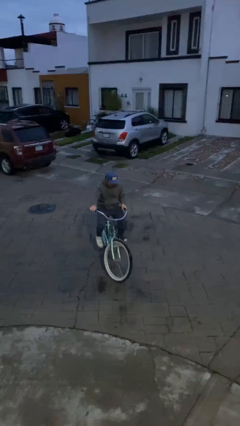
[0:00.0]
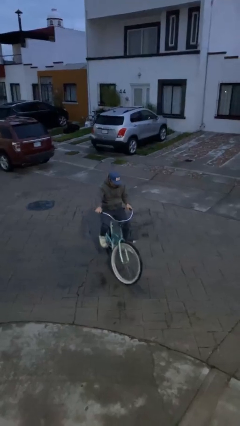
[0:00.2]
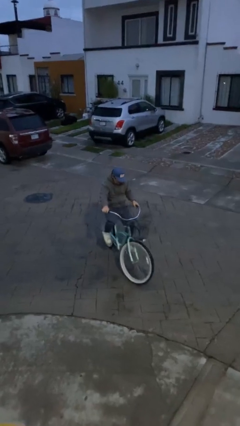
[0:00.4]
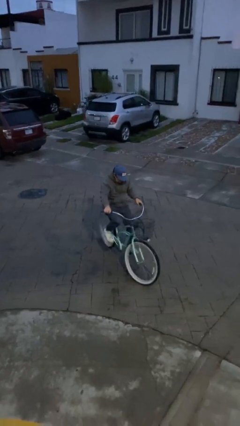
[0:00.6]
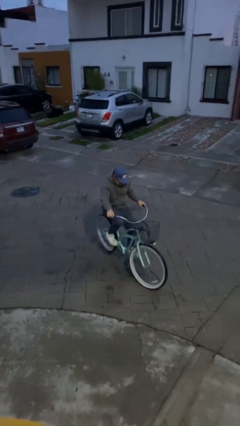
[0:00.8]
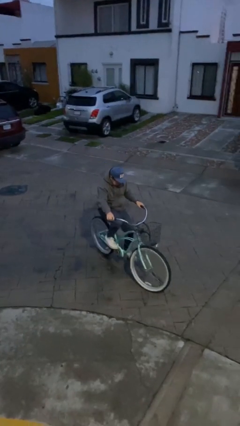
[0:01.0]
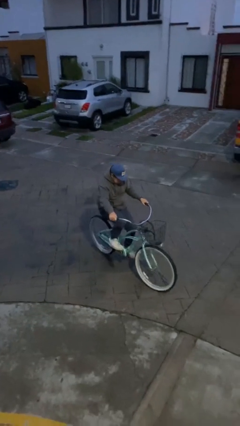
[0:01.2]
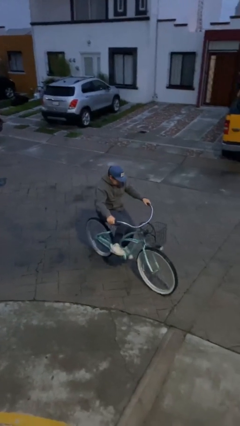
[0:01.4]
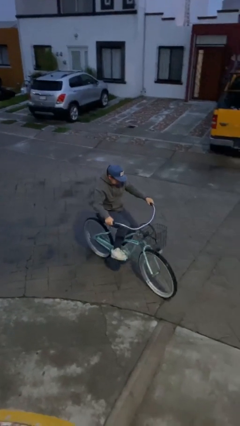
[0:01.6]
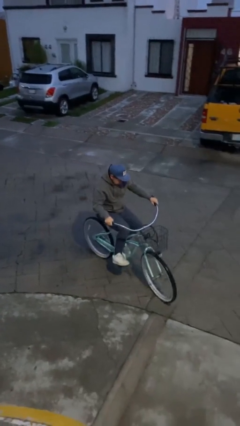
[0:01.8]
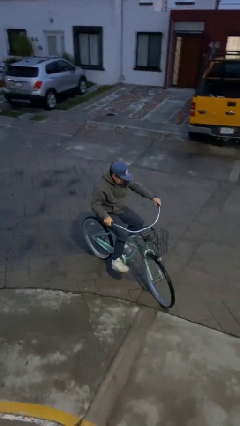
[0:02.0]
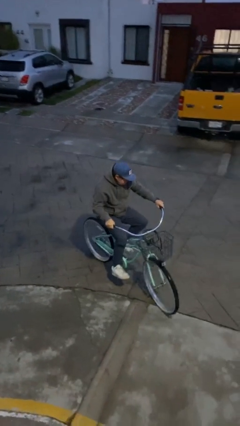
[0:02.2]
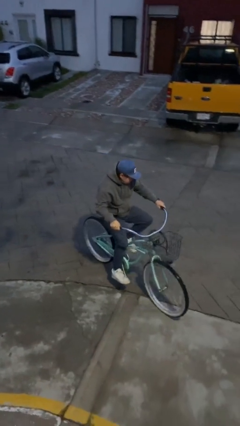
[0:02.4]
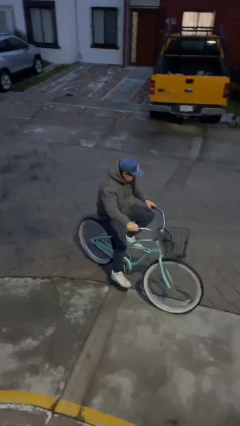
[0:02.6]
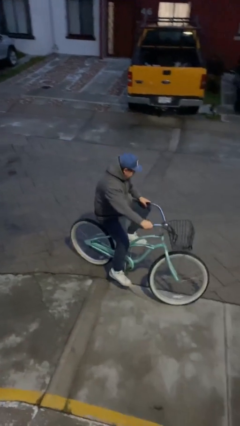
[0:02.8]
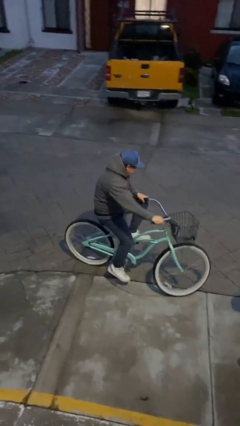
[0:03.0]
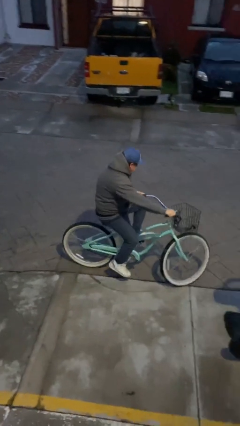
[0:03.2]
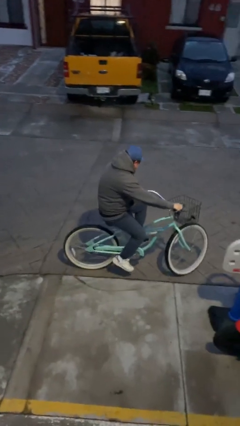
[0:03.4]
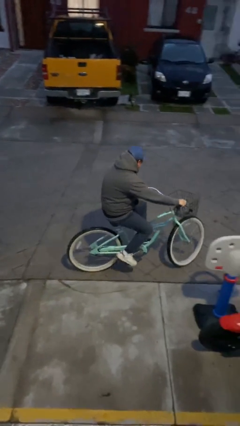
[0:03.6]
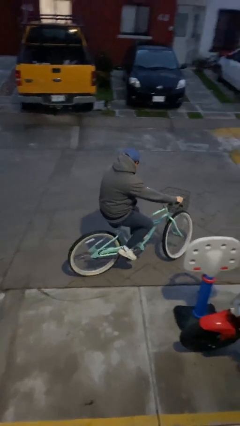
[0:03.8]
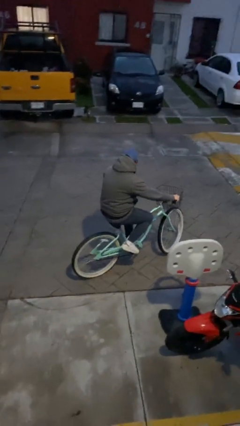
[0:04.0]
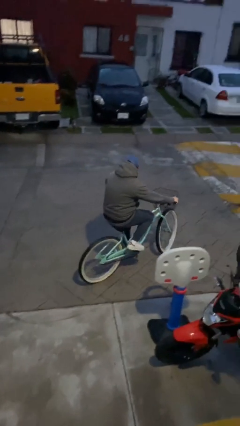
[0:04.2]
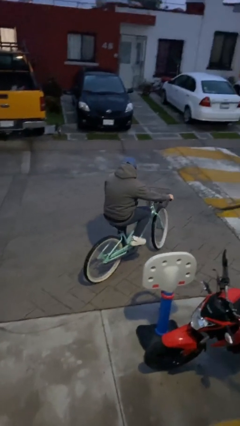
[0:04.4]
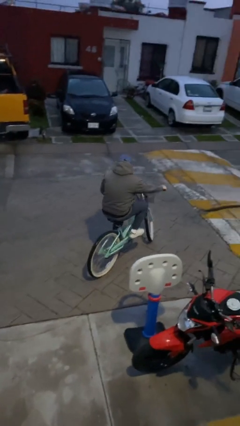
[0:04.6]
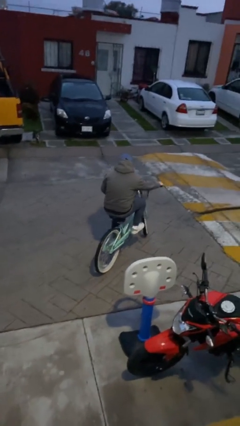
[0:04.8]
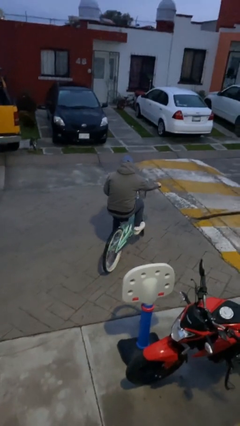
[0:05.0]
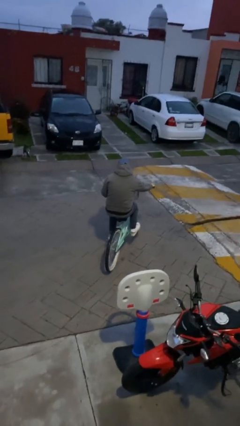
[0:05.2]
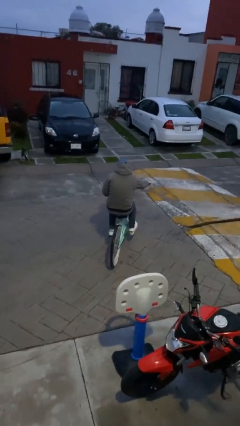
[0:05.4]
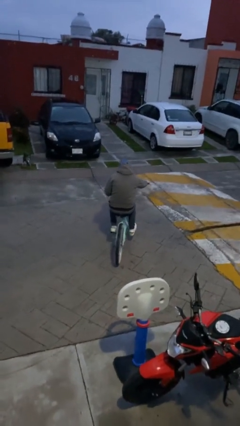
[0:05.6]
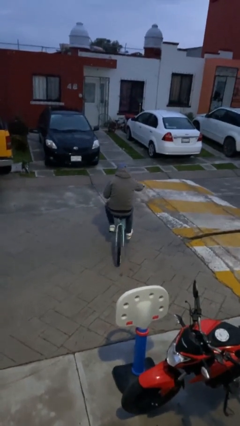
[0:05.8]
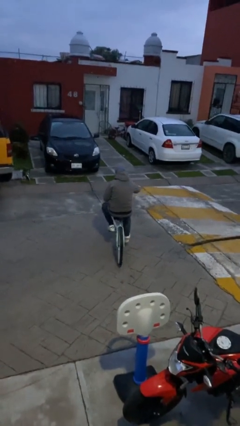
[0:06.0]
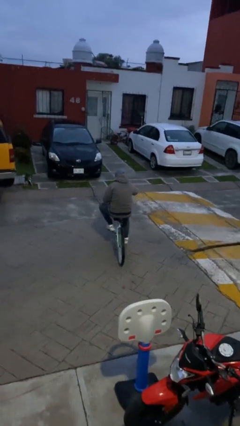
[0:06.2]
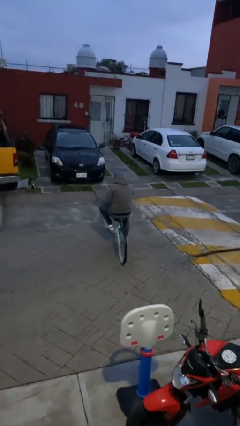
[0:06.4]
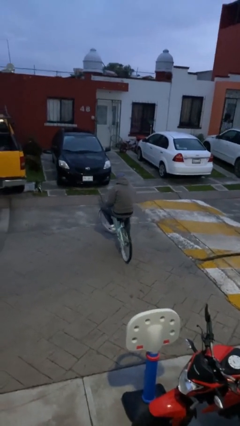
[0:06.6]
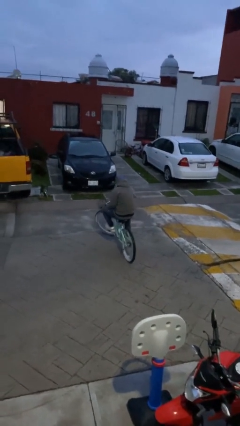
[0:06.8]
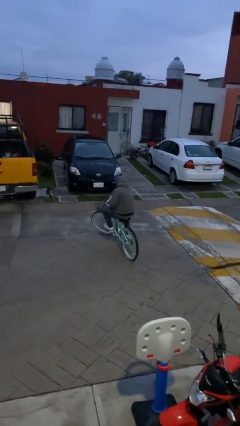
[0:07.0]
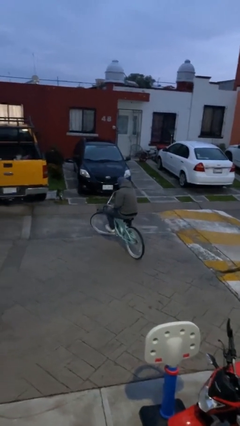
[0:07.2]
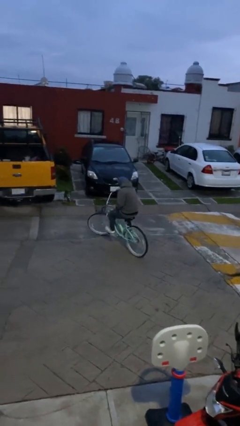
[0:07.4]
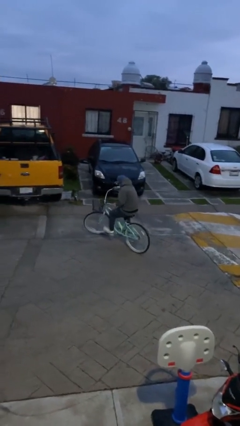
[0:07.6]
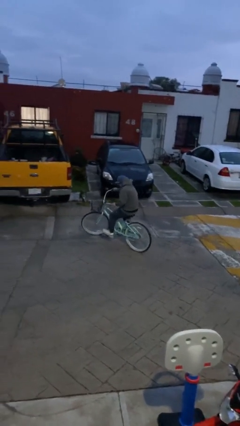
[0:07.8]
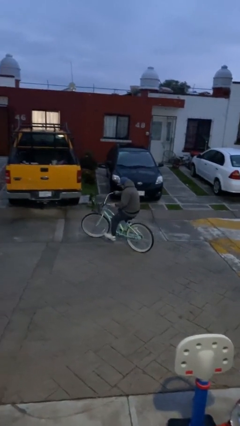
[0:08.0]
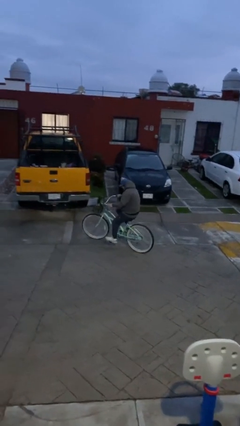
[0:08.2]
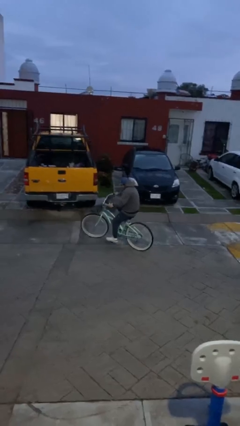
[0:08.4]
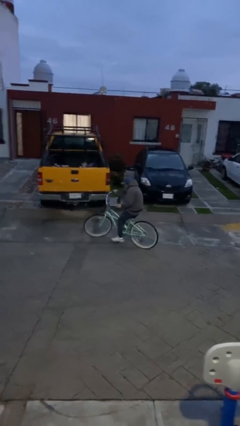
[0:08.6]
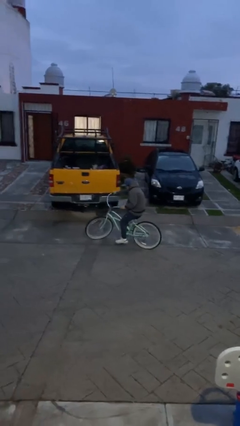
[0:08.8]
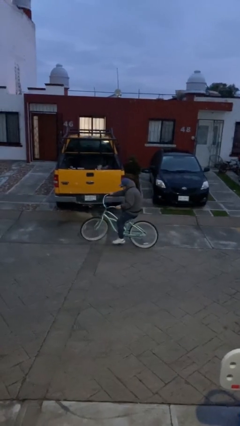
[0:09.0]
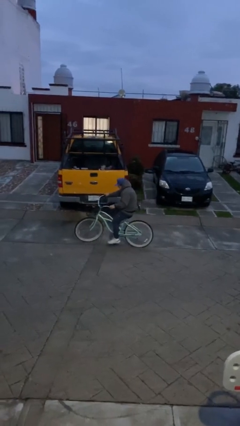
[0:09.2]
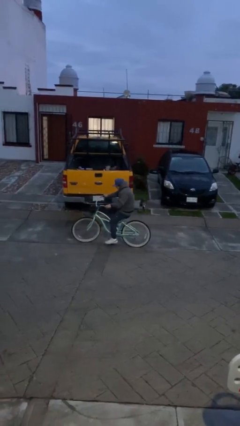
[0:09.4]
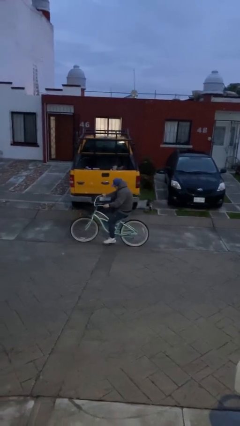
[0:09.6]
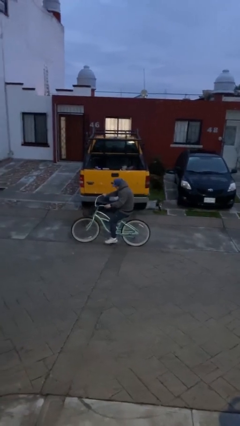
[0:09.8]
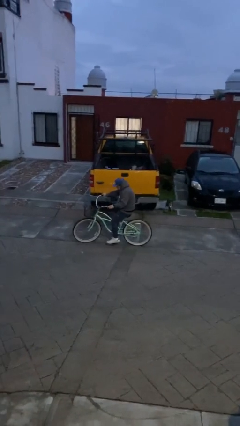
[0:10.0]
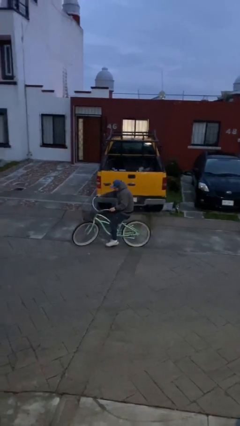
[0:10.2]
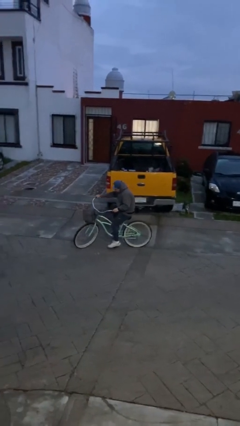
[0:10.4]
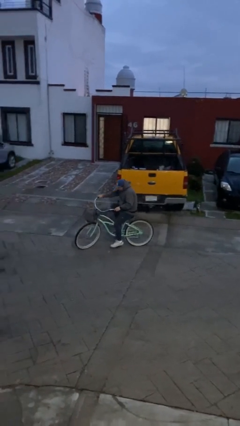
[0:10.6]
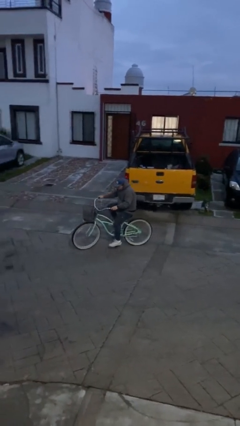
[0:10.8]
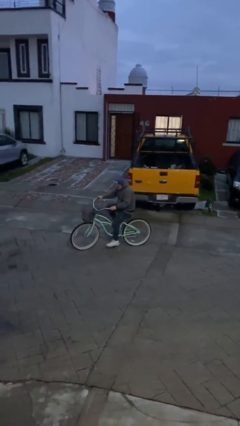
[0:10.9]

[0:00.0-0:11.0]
person rides bicycle

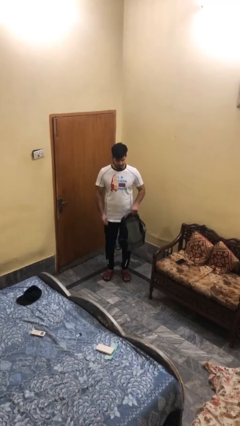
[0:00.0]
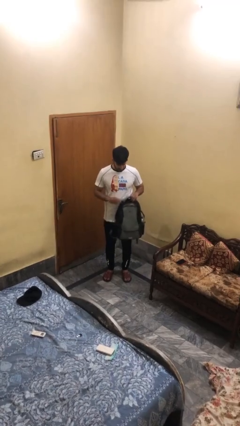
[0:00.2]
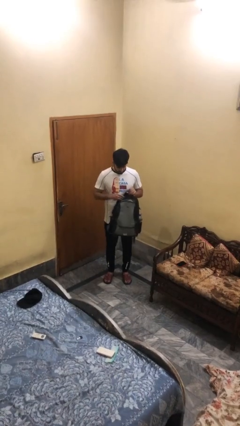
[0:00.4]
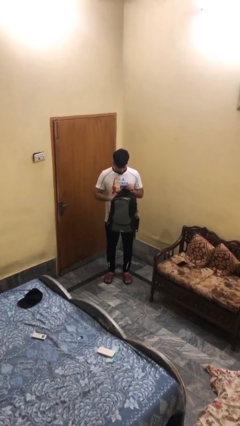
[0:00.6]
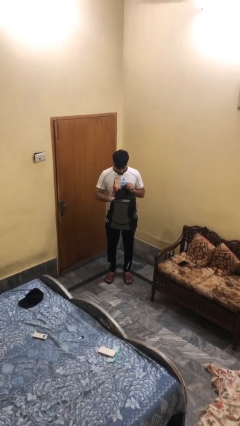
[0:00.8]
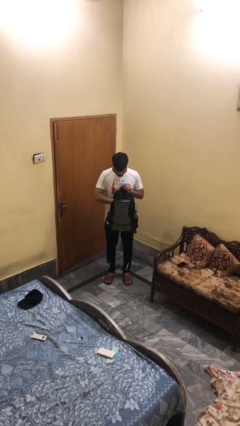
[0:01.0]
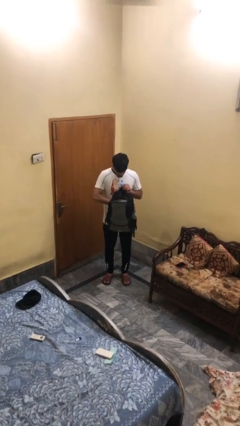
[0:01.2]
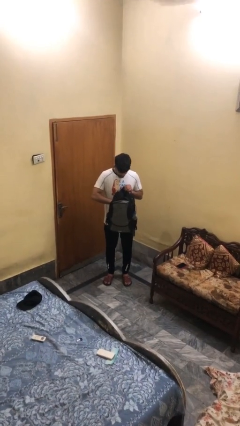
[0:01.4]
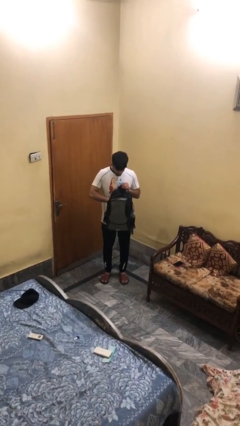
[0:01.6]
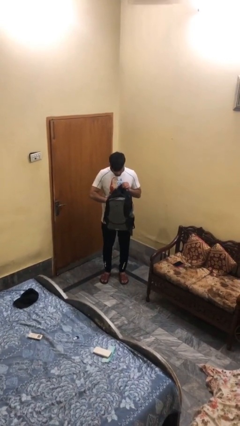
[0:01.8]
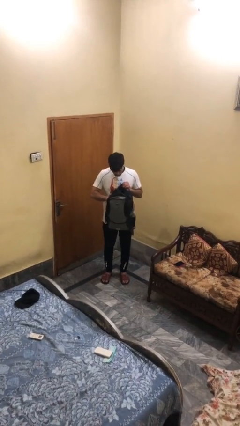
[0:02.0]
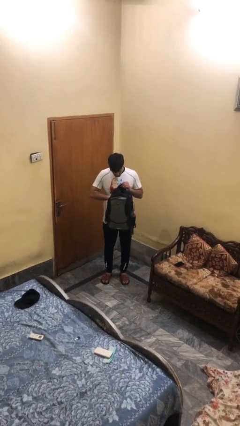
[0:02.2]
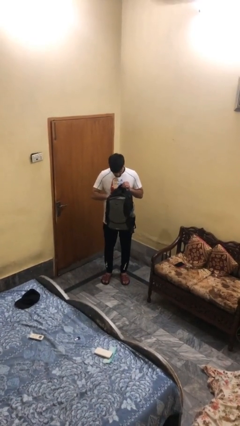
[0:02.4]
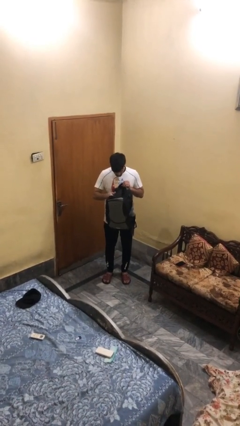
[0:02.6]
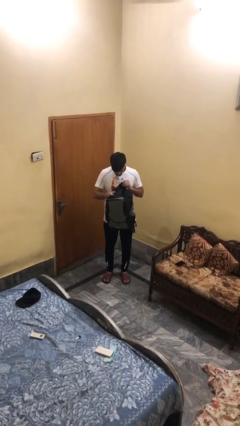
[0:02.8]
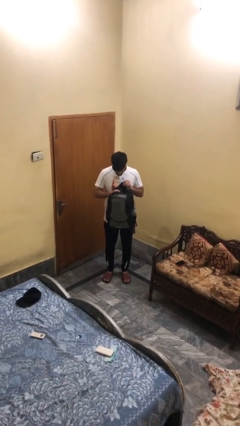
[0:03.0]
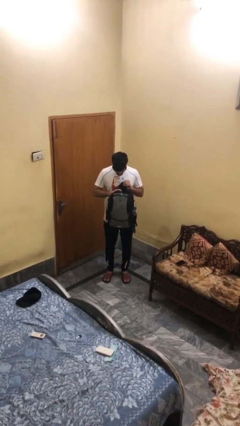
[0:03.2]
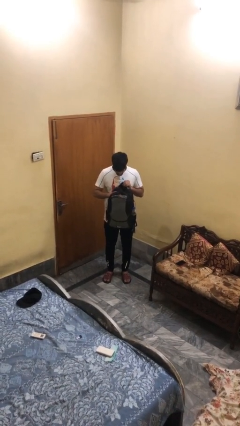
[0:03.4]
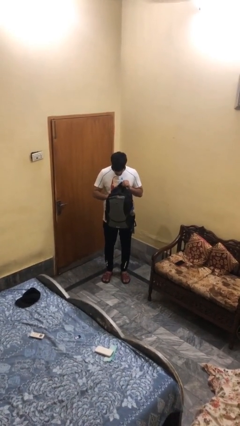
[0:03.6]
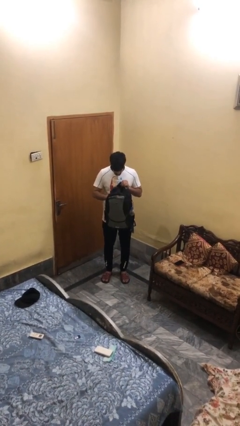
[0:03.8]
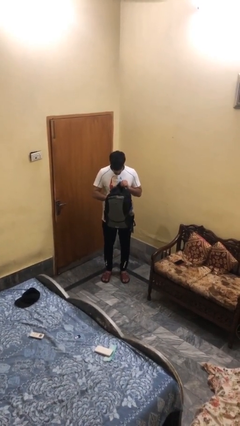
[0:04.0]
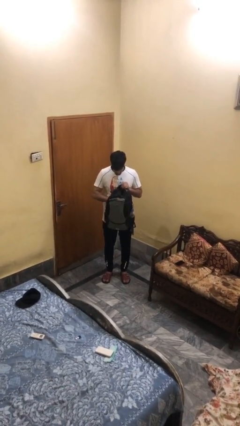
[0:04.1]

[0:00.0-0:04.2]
person searches in backpack

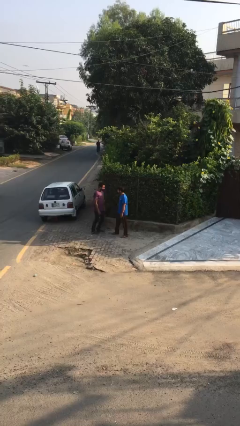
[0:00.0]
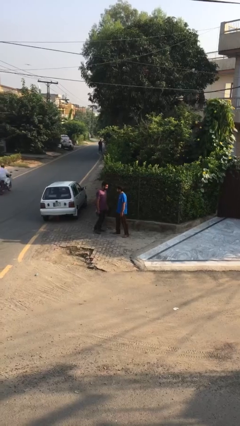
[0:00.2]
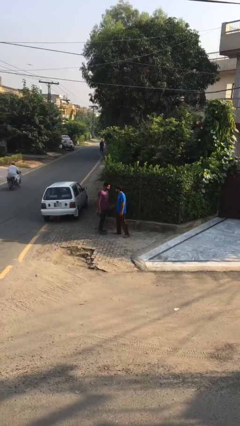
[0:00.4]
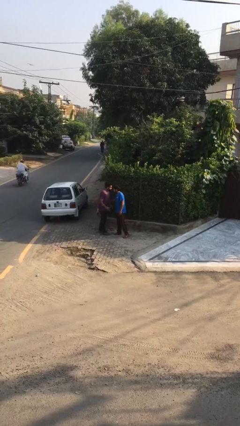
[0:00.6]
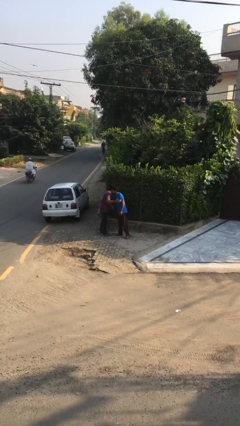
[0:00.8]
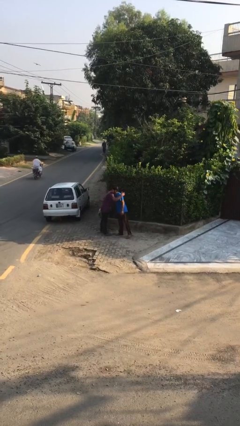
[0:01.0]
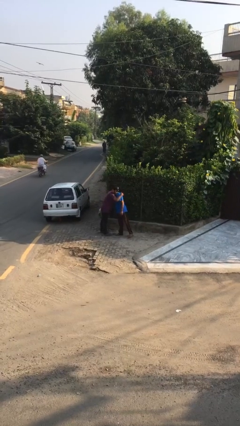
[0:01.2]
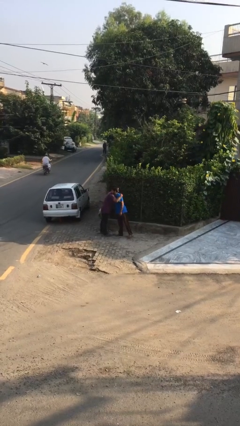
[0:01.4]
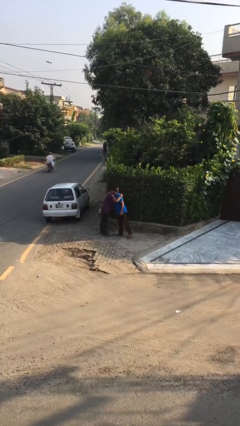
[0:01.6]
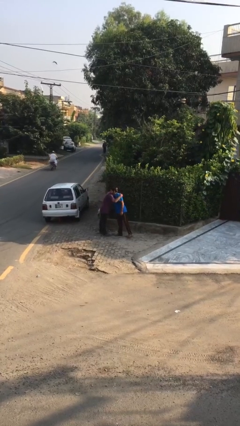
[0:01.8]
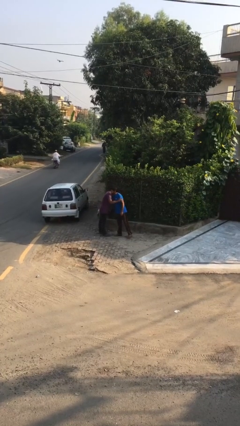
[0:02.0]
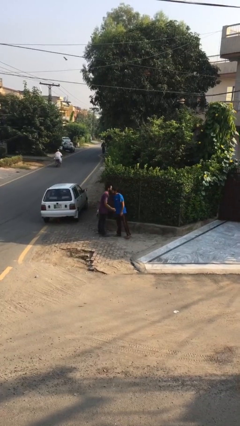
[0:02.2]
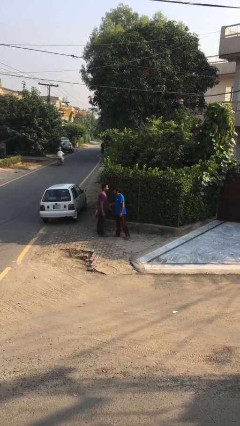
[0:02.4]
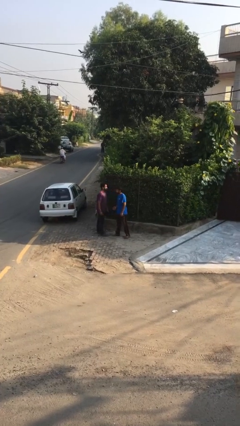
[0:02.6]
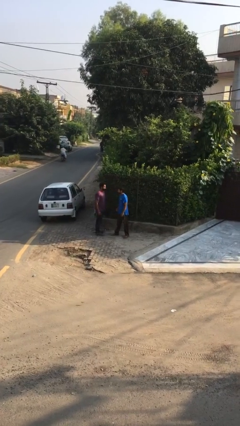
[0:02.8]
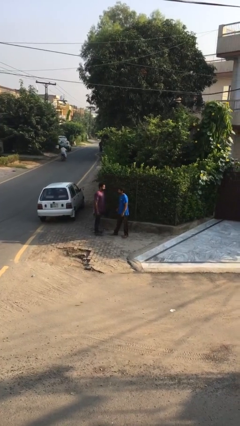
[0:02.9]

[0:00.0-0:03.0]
person embraces person

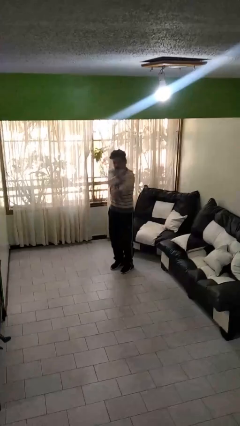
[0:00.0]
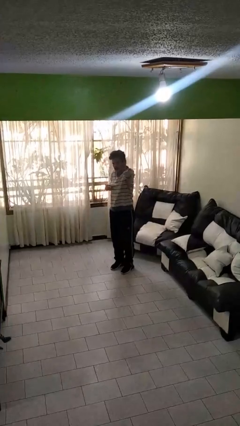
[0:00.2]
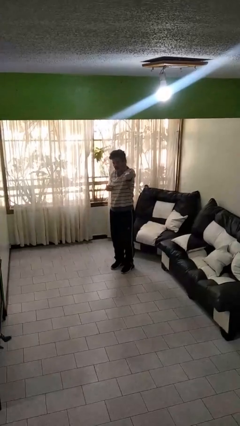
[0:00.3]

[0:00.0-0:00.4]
person karate chop
